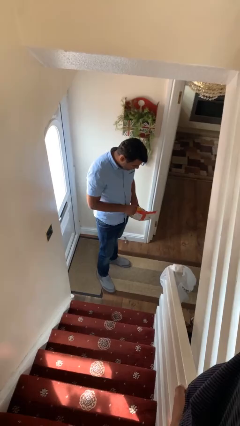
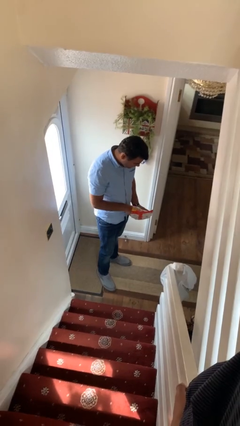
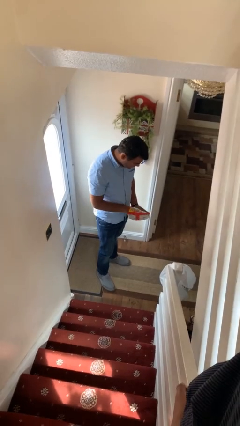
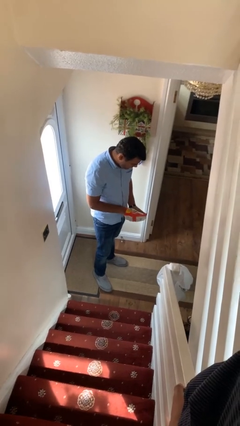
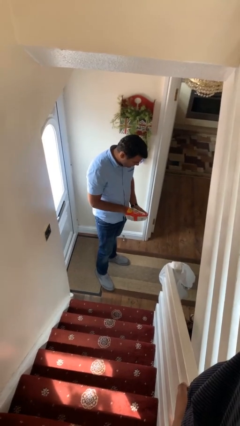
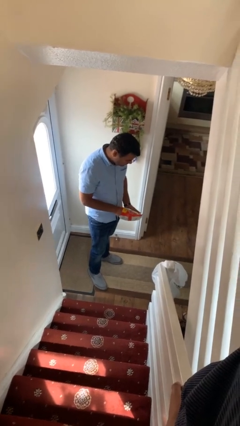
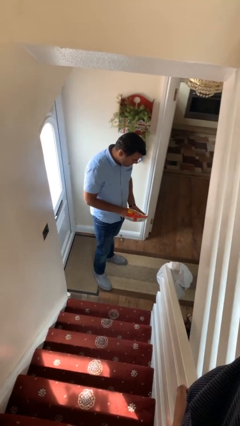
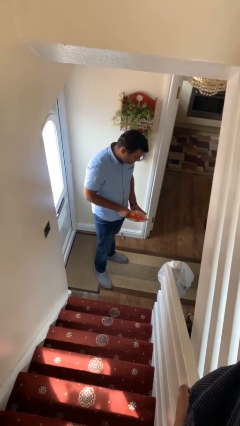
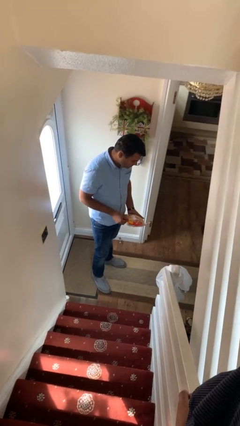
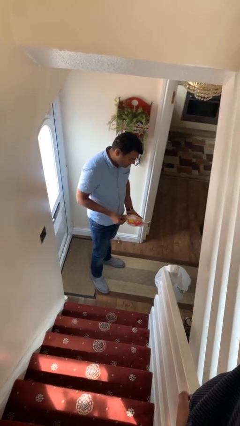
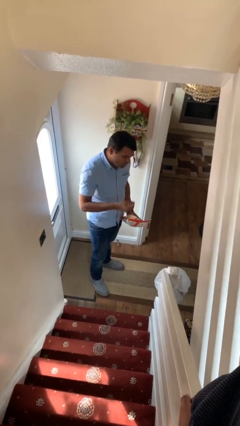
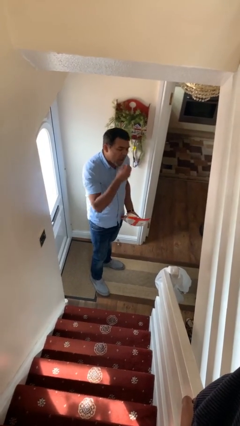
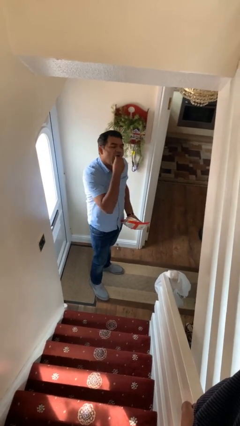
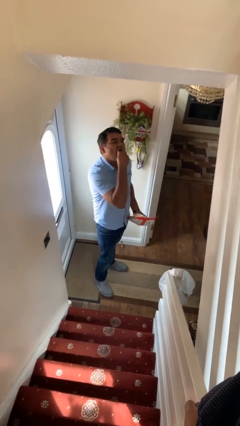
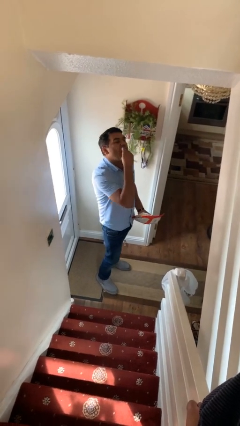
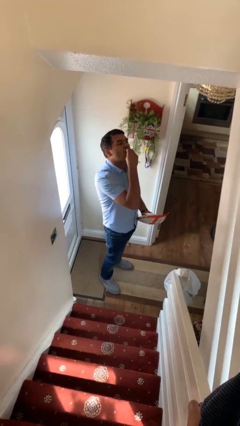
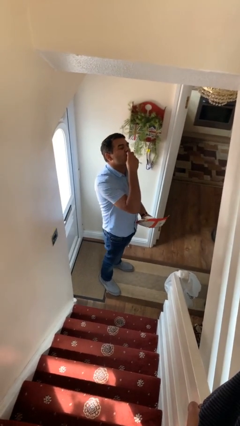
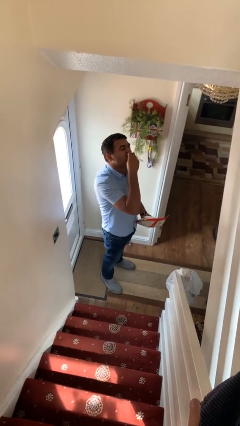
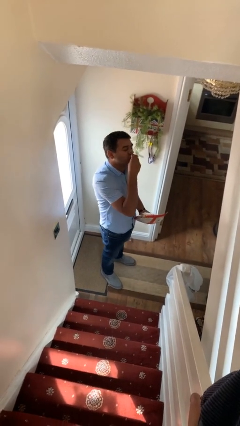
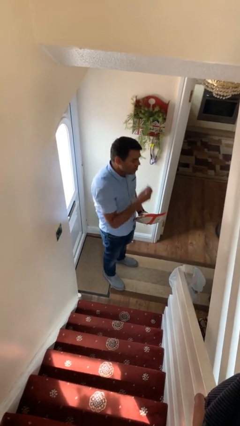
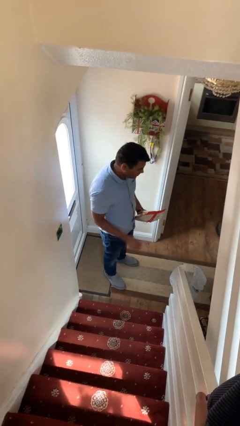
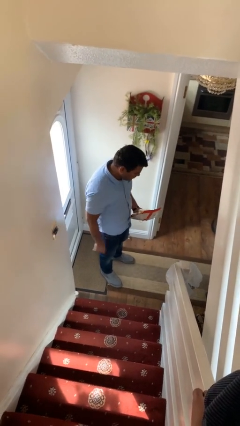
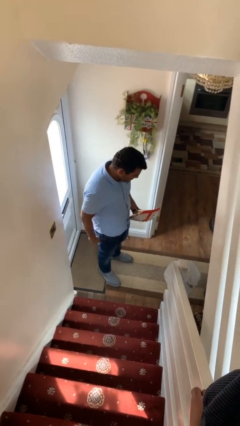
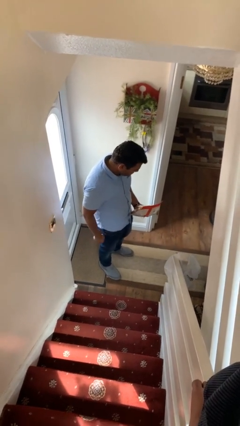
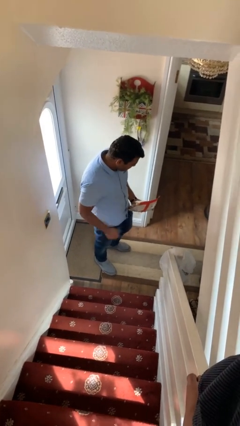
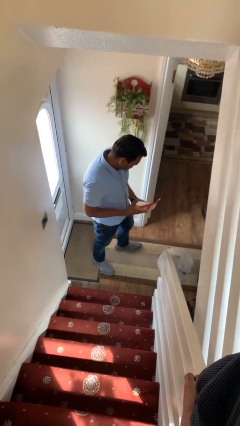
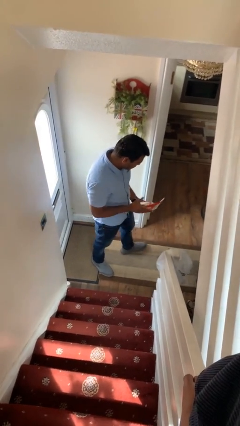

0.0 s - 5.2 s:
person eats snack from bag

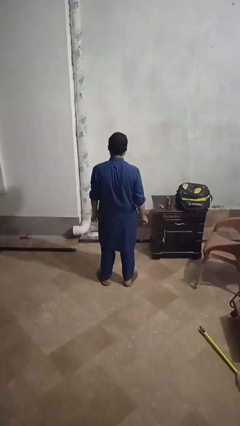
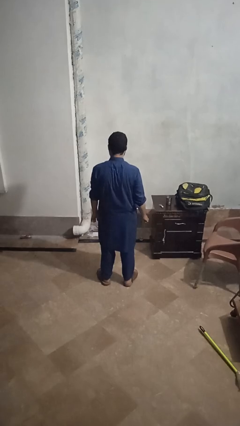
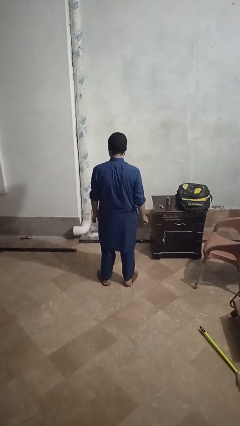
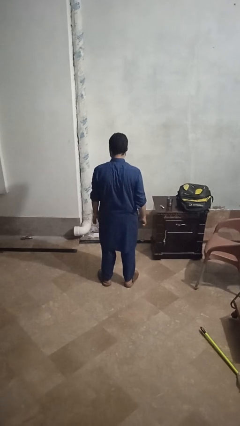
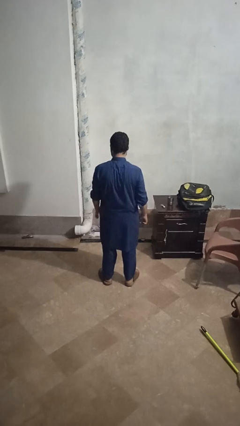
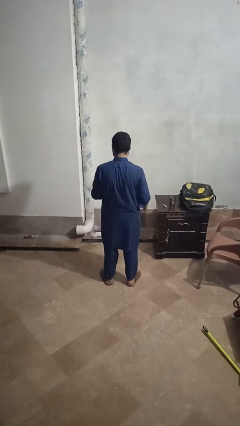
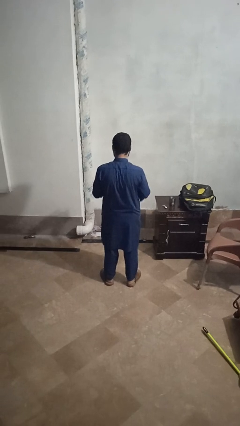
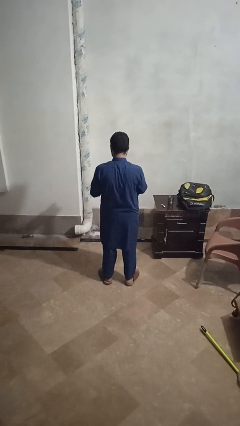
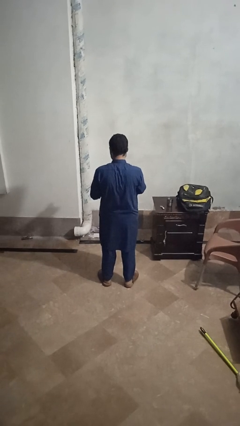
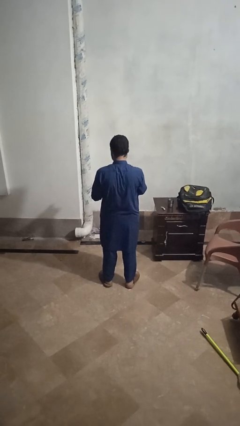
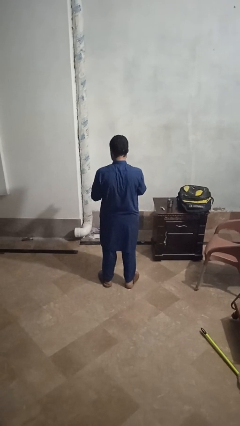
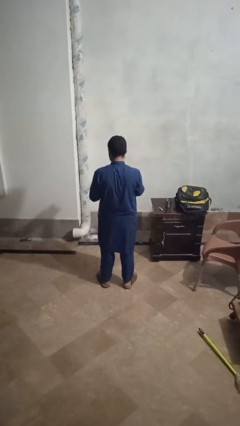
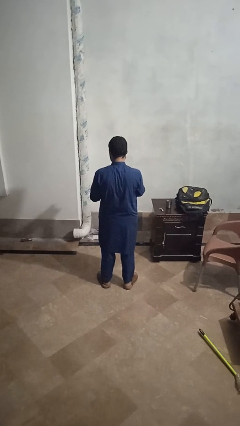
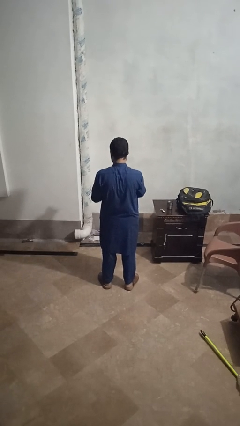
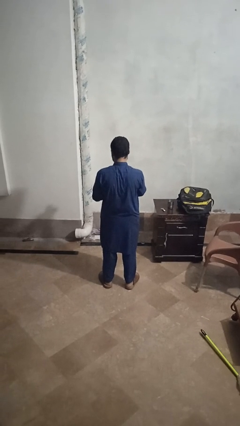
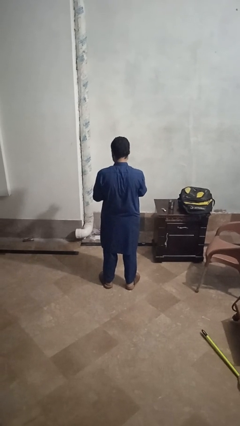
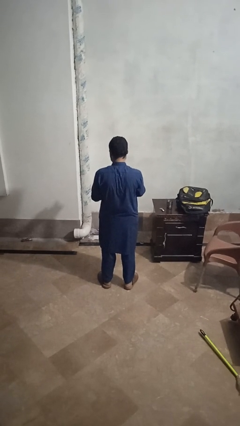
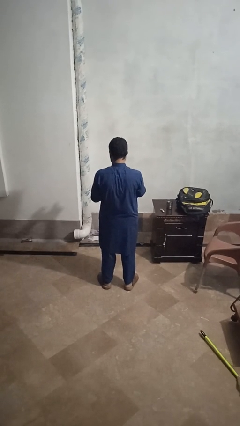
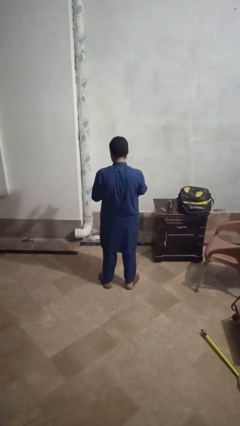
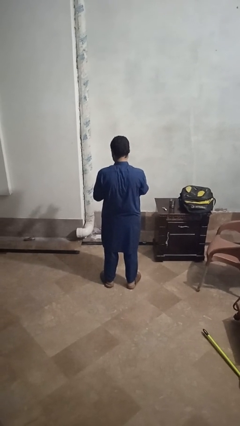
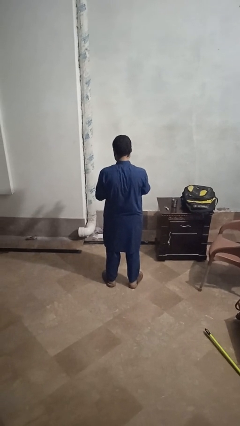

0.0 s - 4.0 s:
person files fingernails

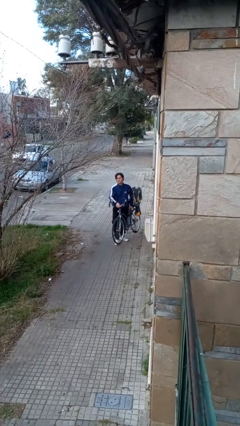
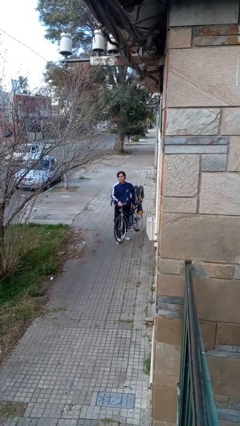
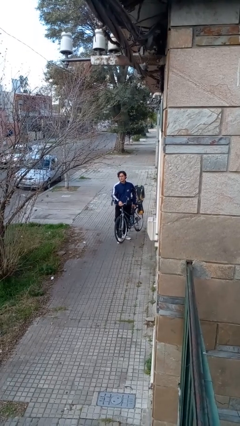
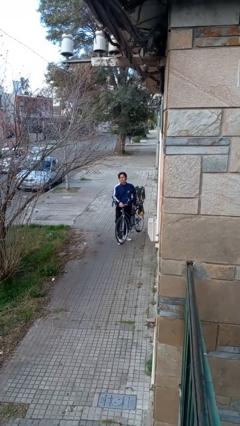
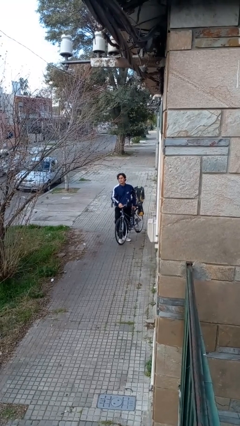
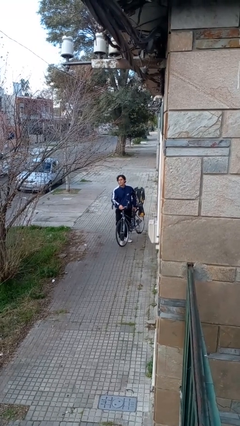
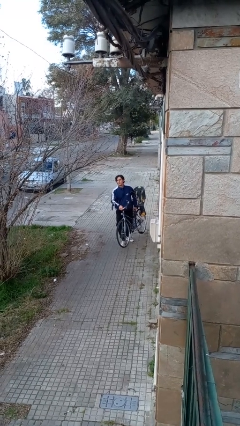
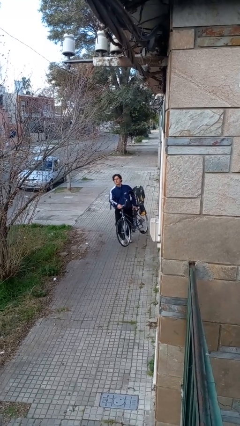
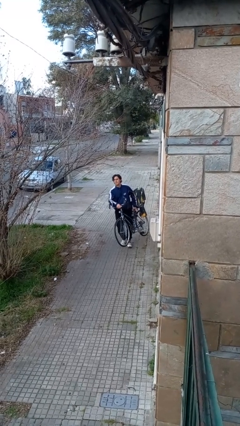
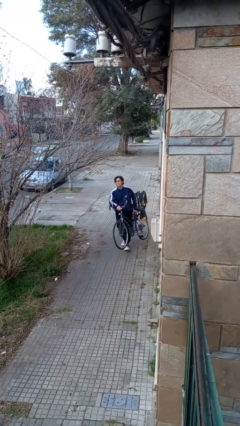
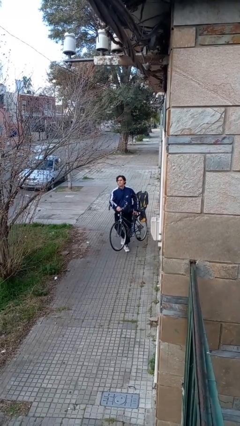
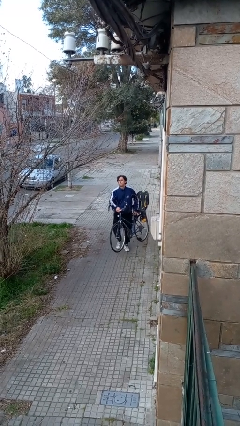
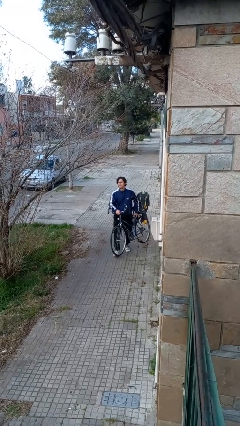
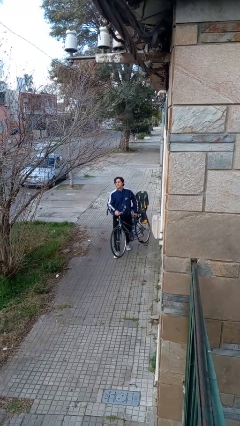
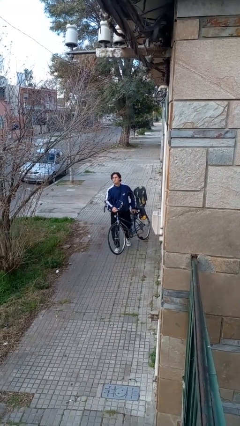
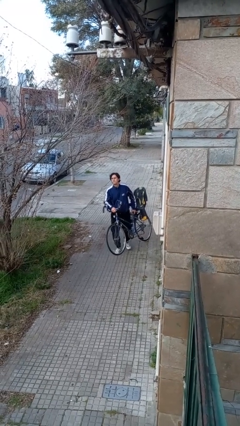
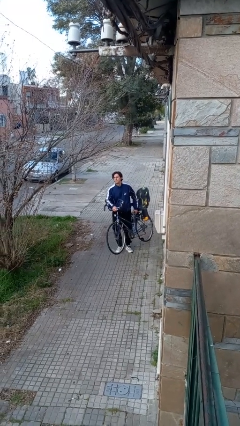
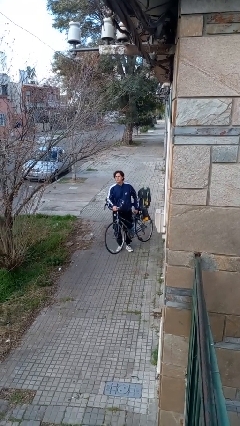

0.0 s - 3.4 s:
person carries bicycle

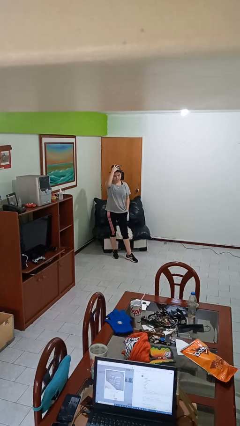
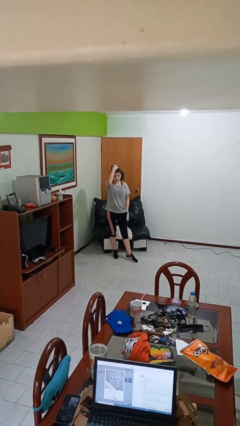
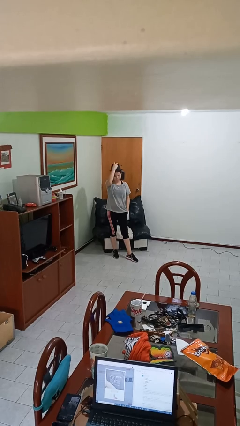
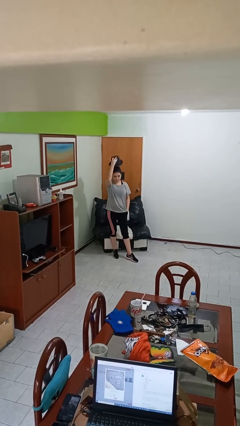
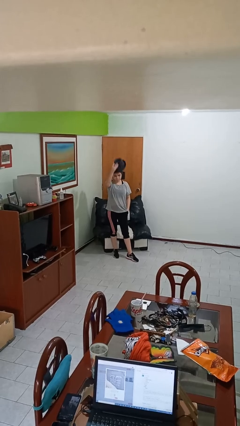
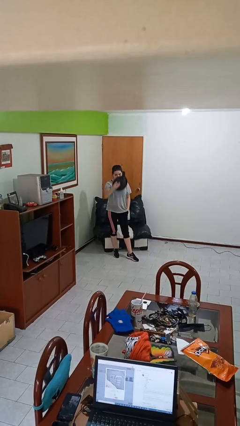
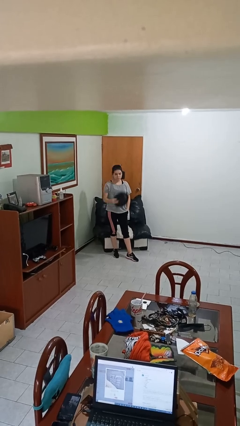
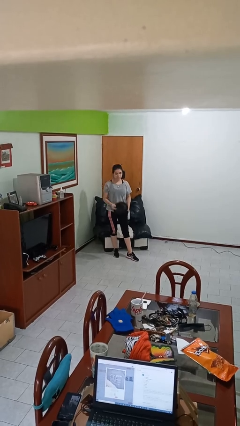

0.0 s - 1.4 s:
person takes off hat

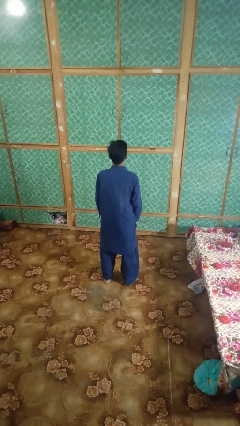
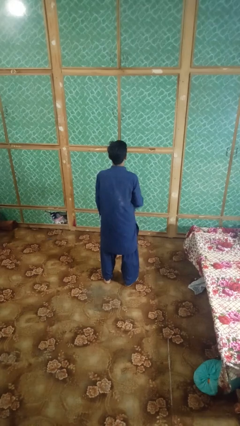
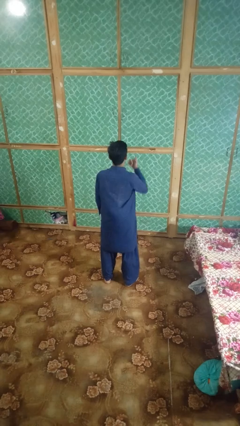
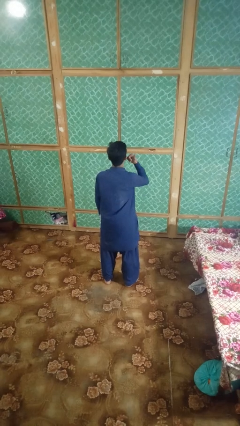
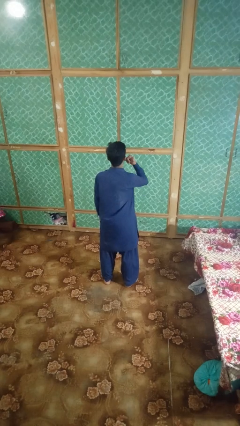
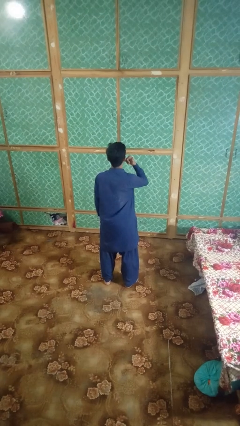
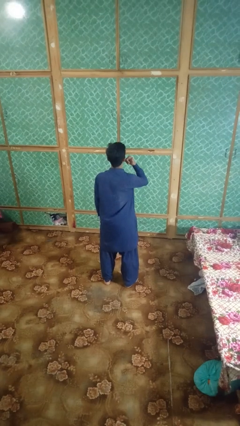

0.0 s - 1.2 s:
person gestures call me

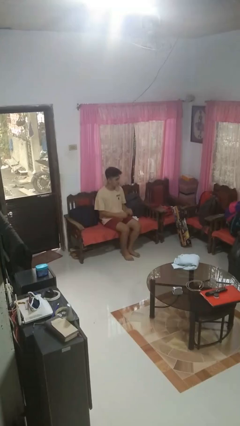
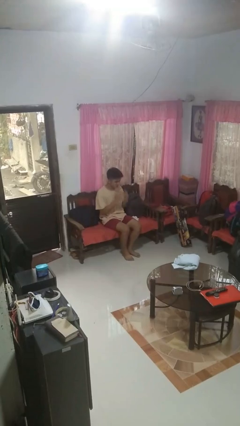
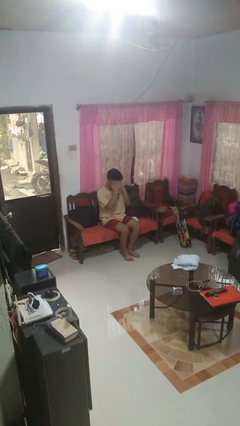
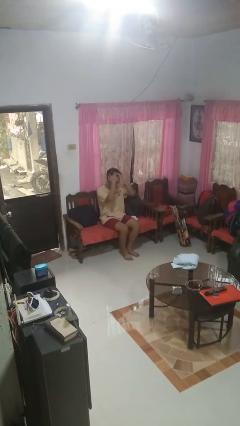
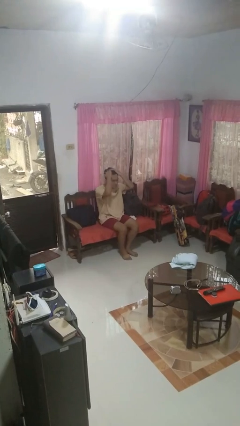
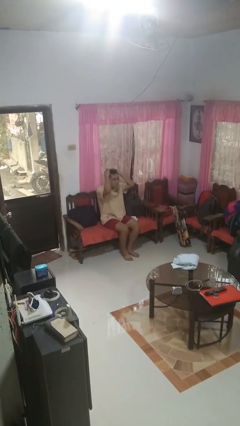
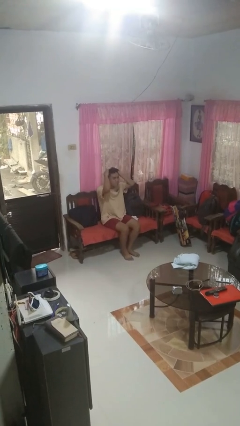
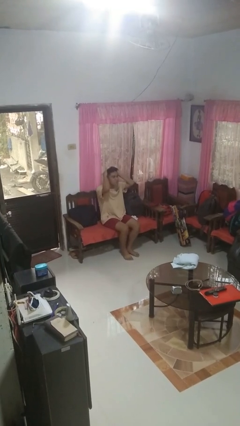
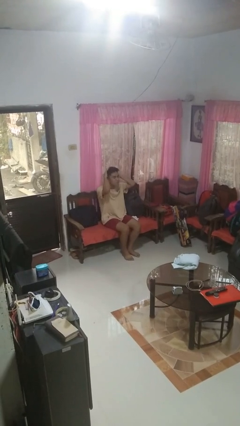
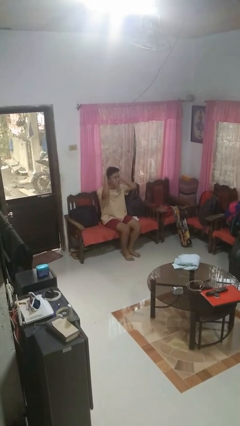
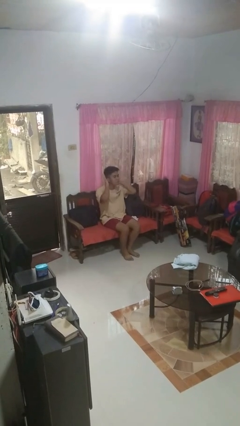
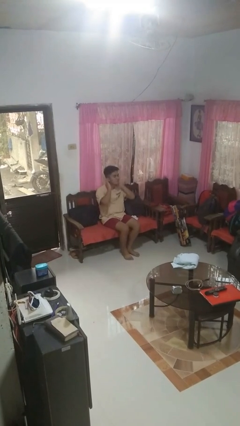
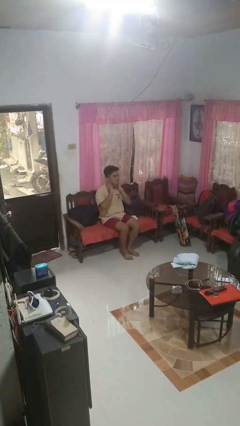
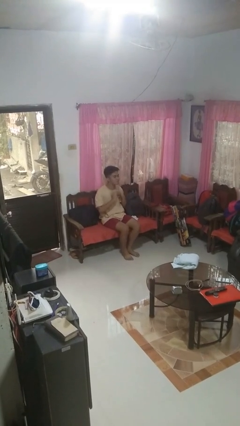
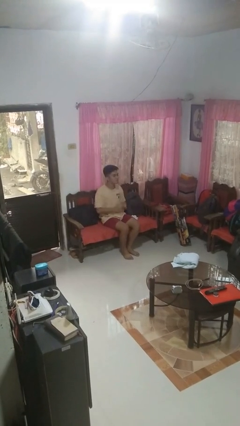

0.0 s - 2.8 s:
person strokes hair
